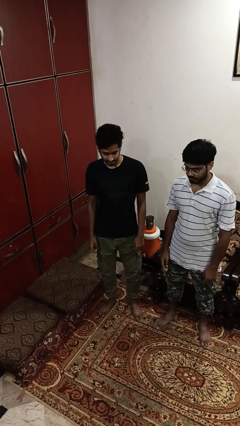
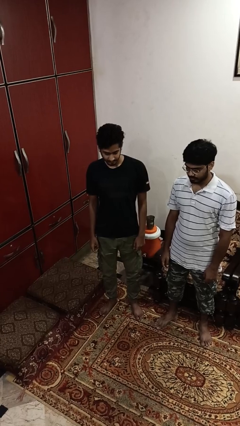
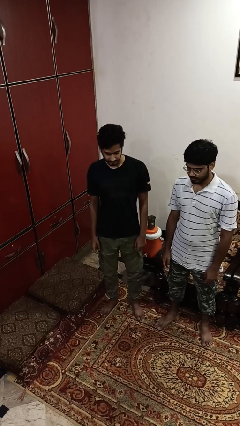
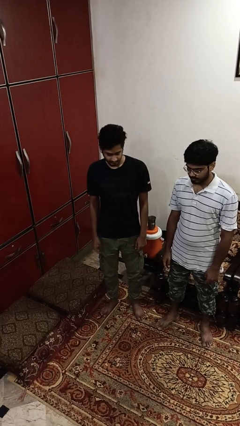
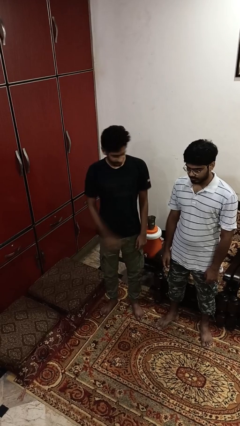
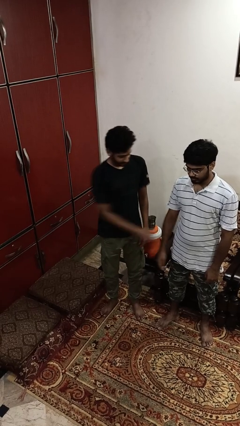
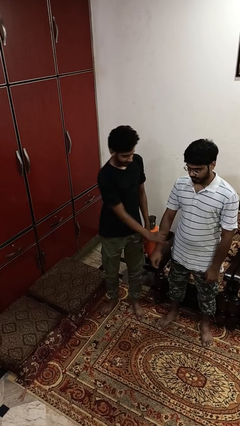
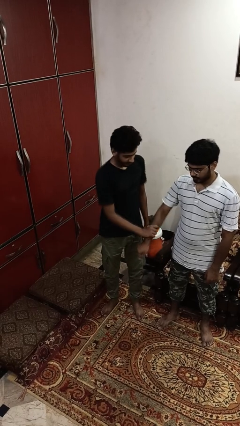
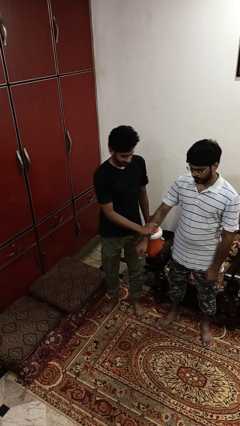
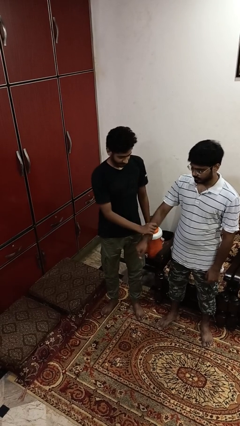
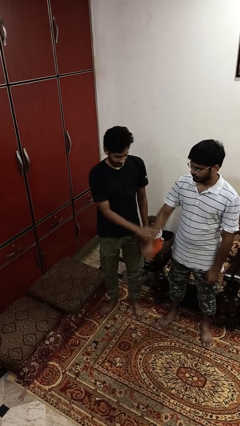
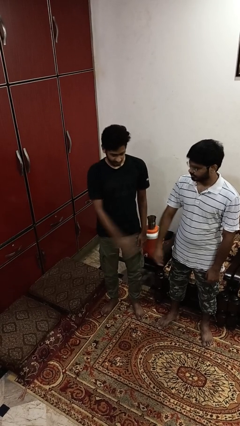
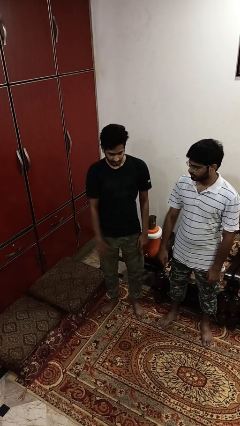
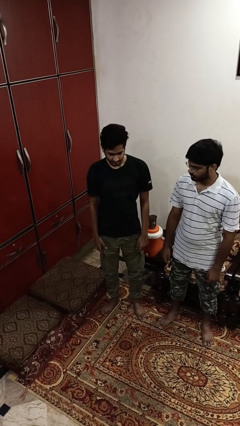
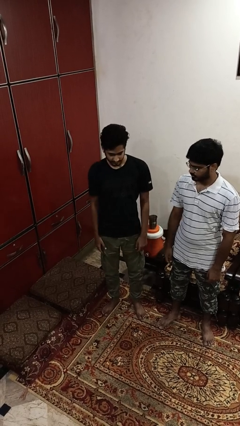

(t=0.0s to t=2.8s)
person grabs person by forearm

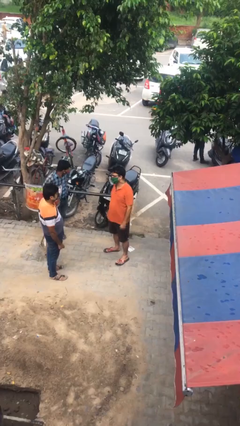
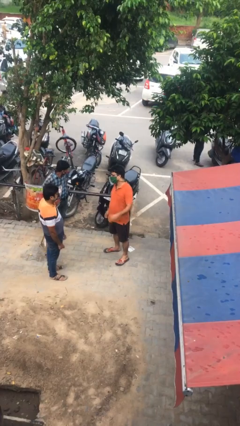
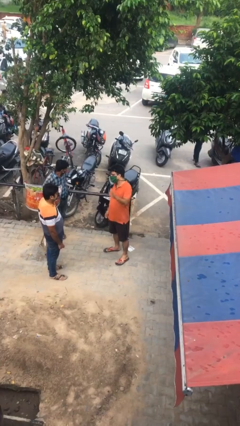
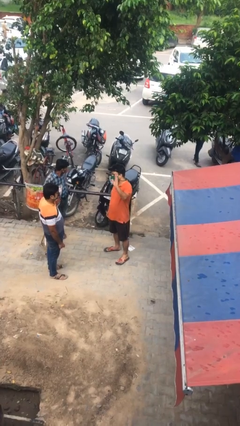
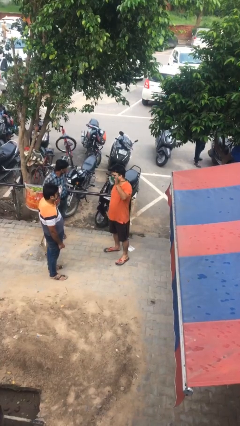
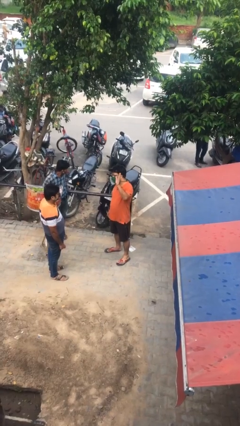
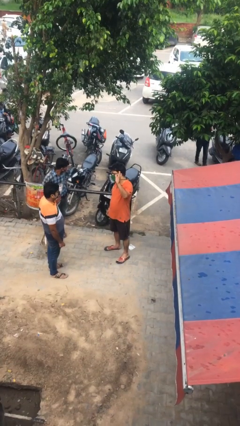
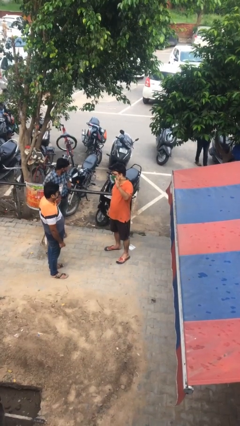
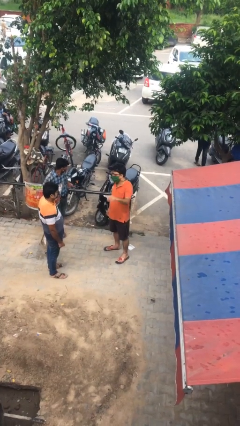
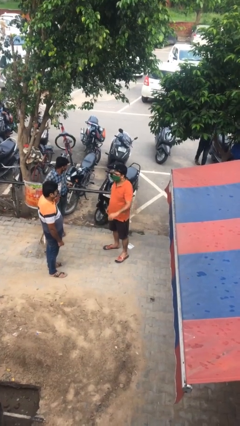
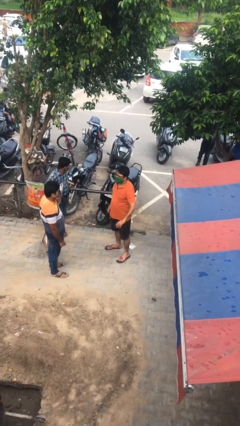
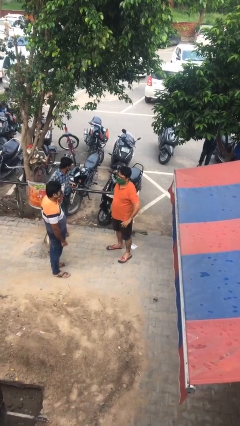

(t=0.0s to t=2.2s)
person waves at person

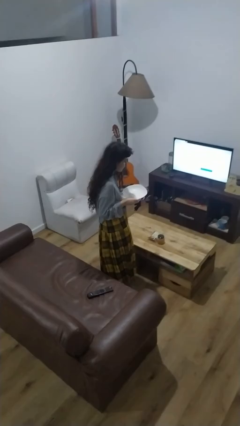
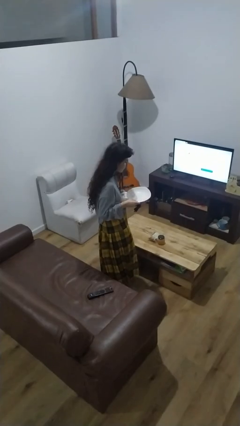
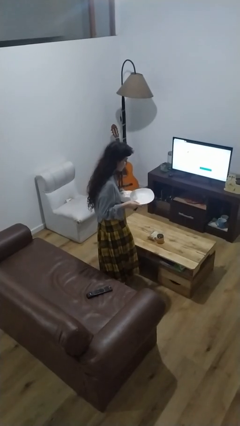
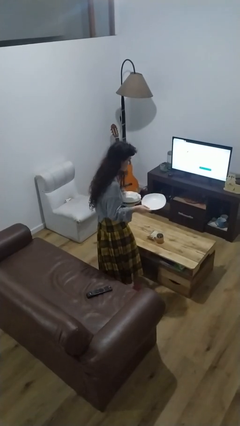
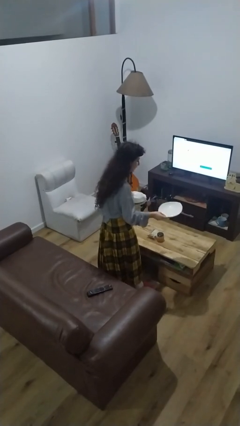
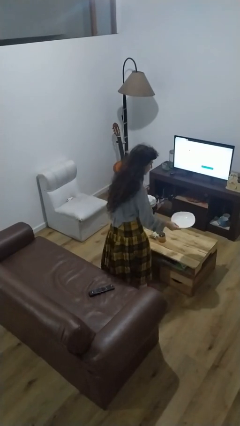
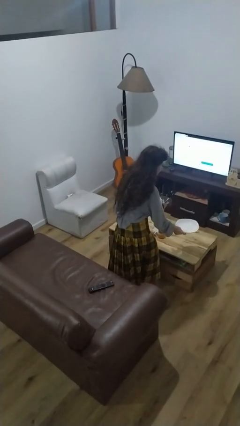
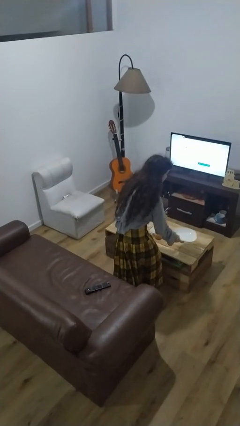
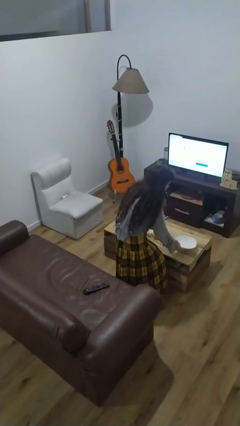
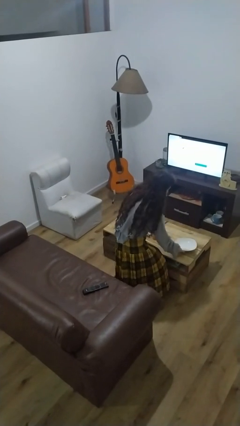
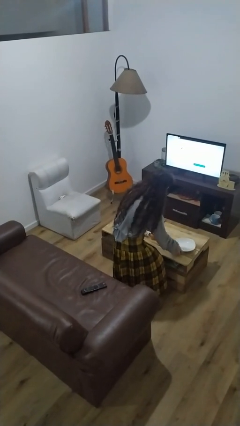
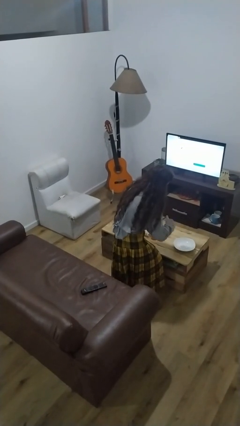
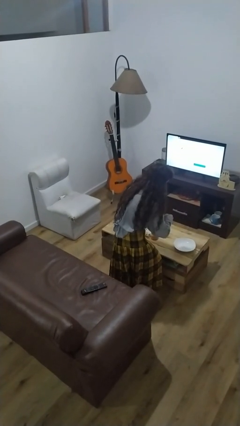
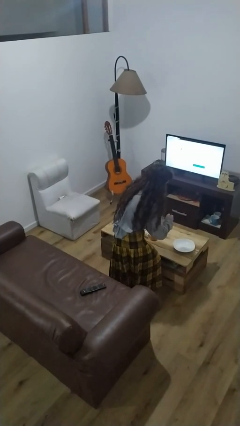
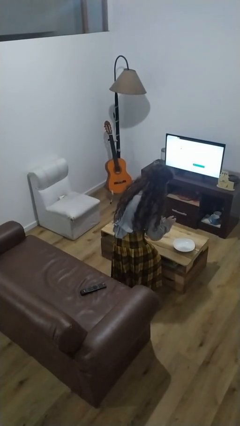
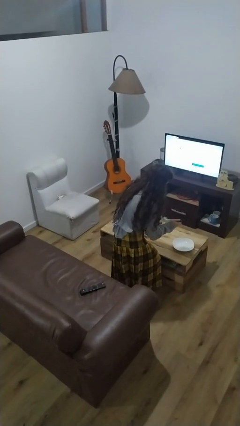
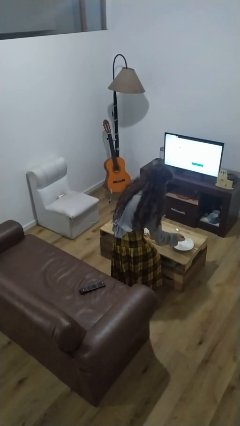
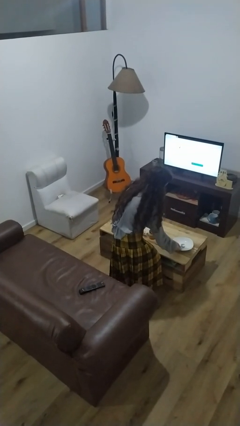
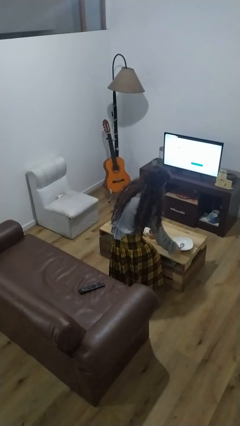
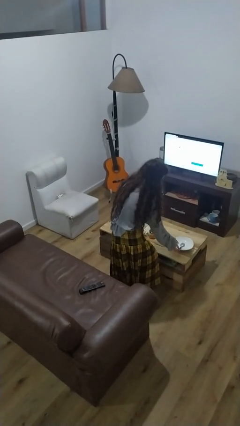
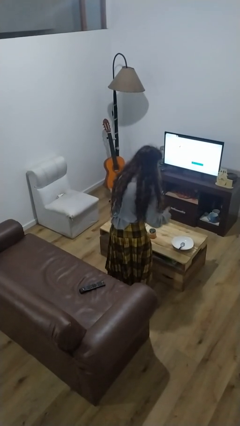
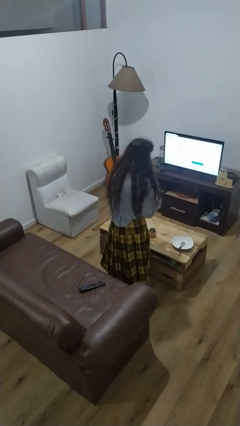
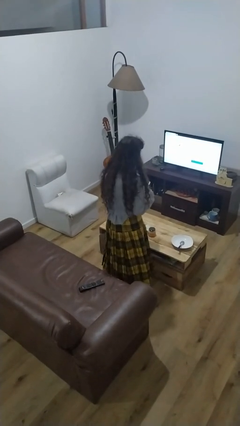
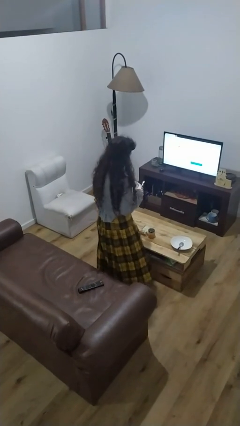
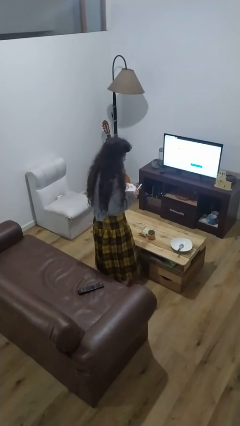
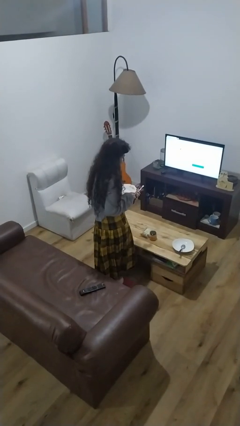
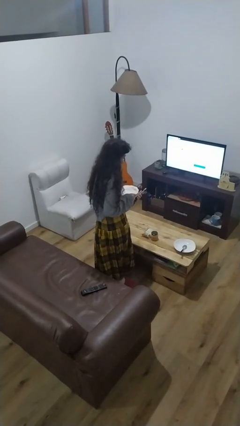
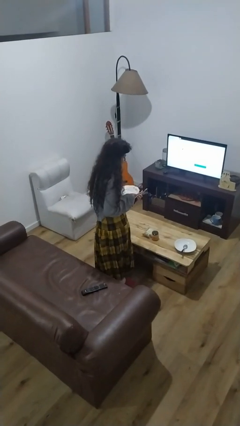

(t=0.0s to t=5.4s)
person sets table

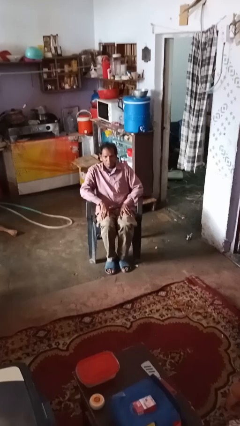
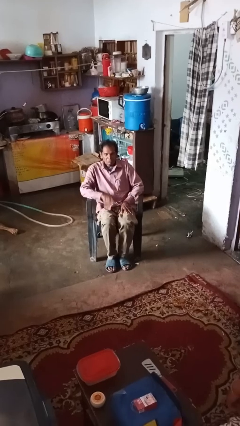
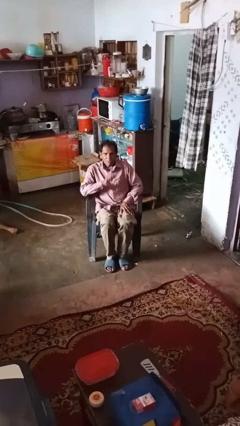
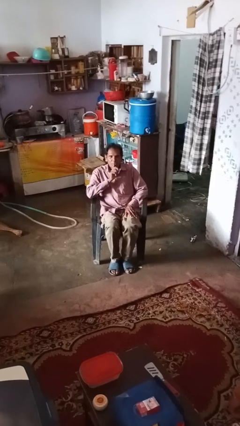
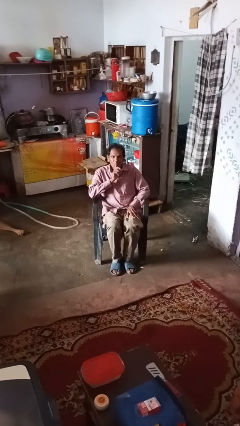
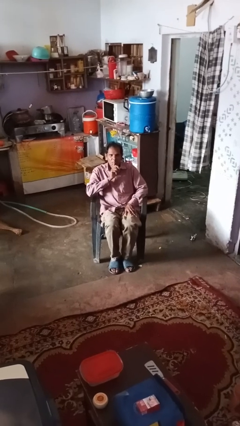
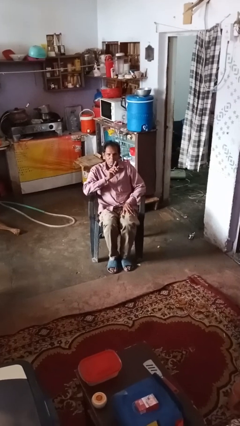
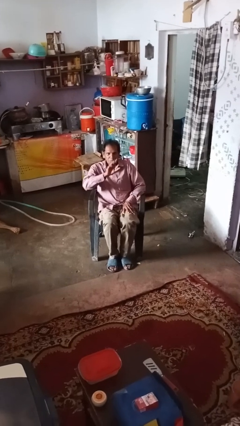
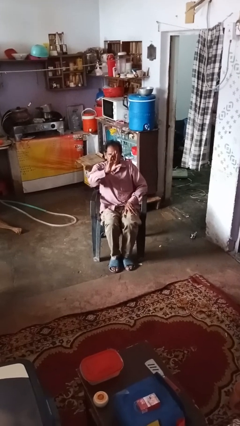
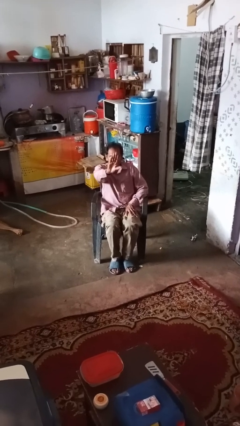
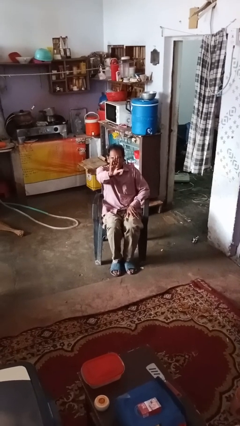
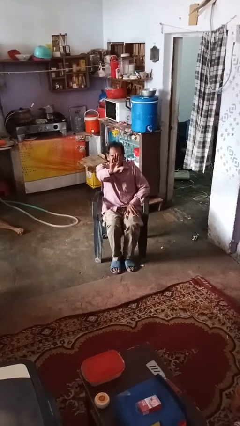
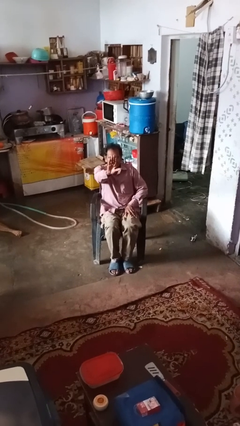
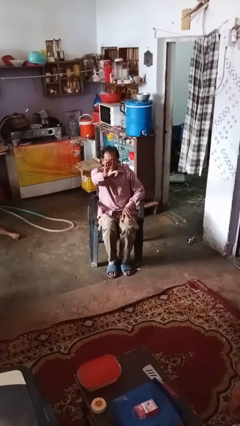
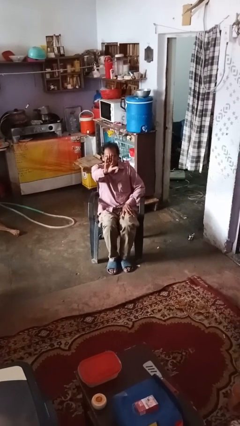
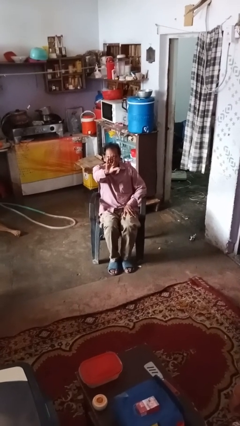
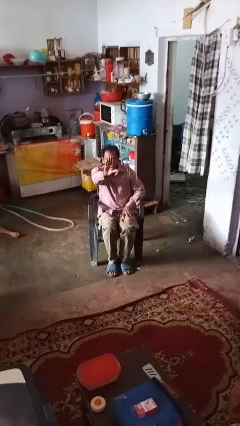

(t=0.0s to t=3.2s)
person gestures be quiet

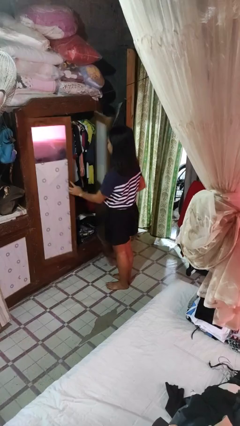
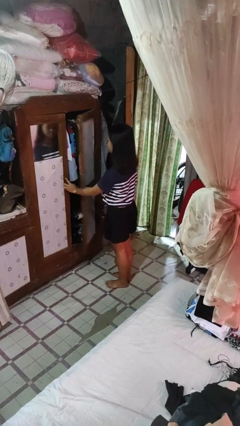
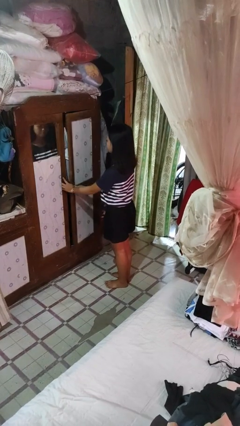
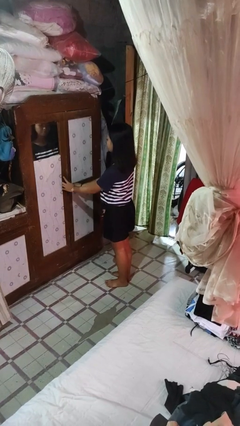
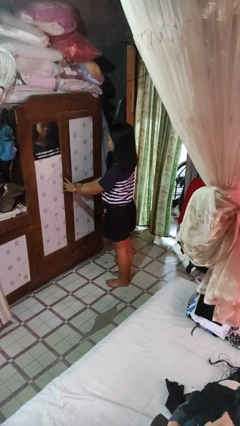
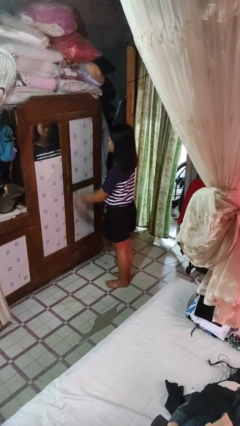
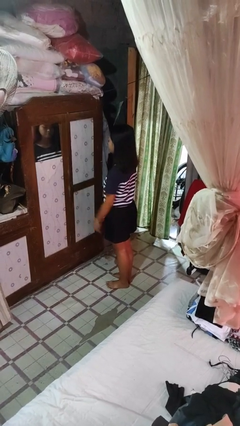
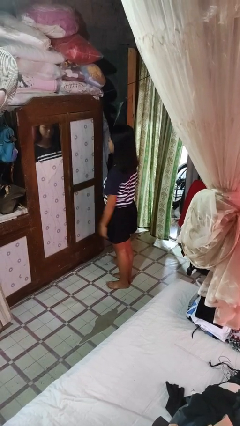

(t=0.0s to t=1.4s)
person closes closet door

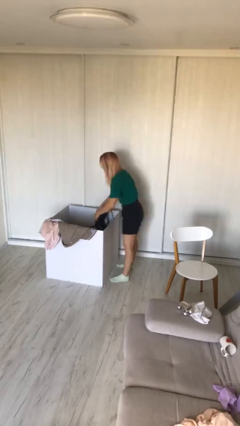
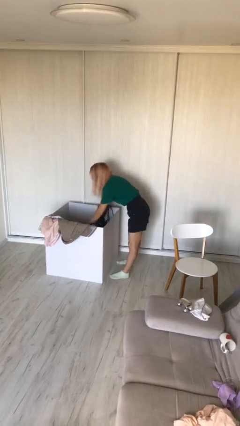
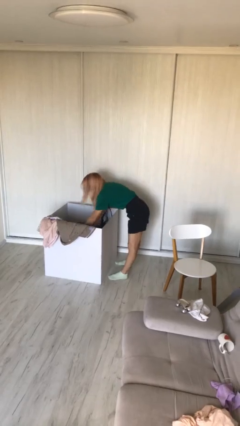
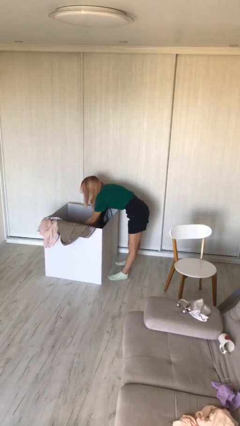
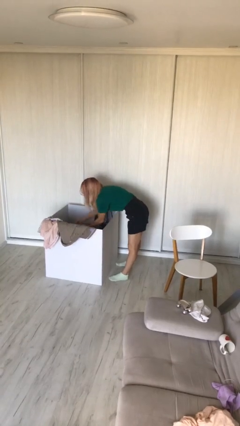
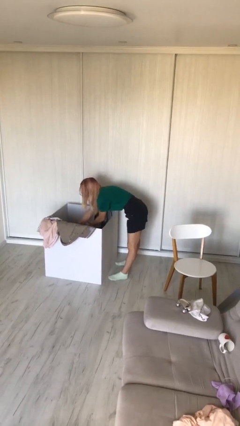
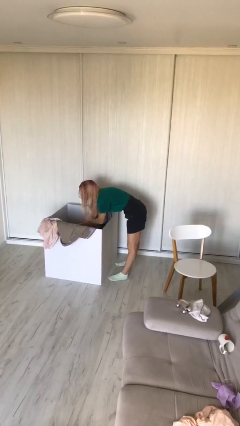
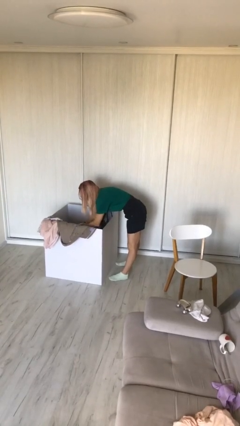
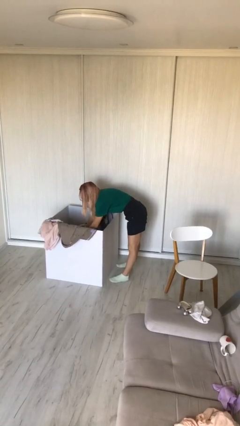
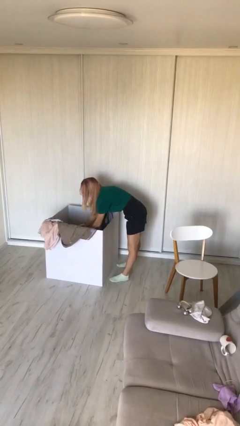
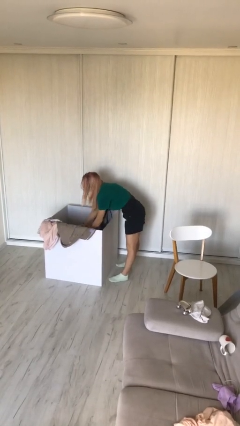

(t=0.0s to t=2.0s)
person searches in box
